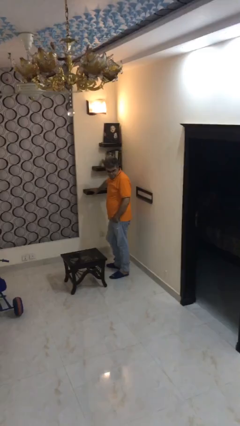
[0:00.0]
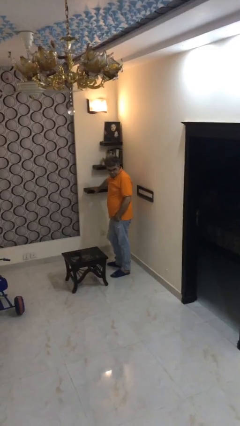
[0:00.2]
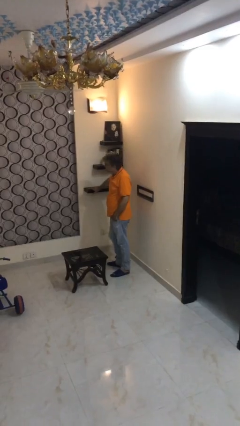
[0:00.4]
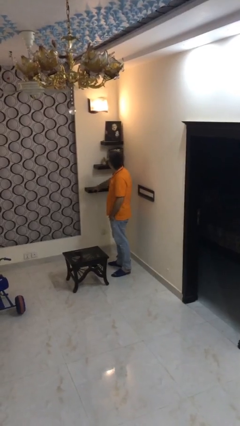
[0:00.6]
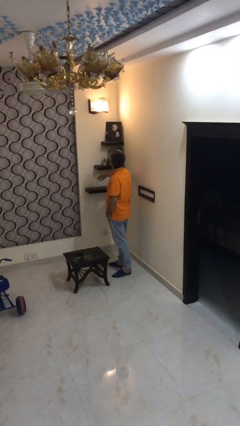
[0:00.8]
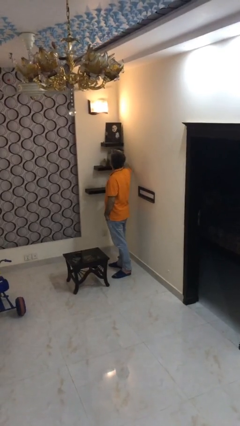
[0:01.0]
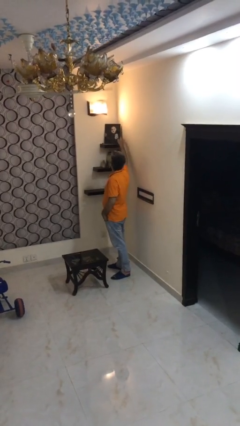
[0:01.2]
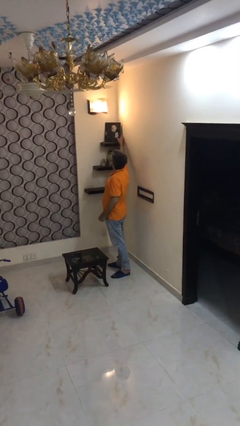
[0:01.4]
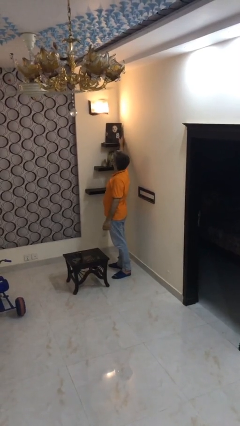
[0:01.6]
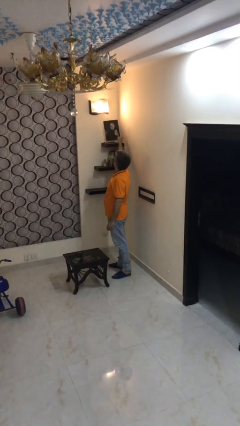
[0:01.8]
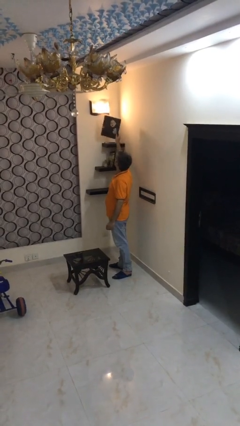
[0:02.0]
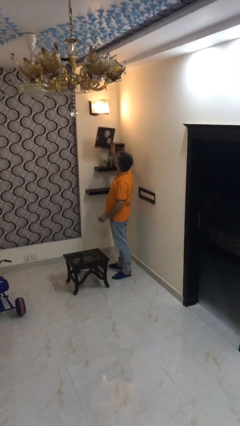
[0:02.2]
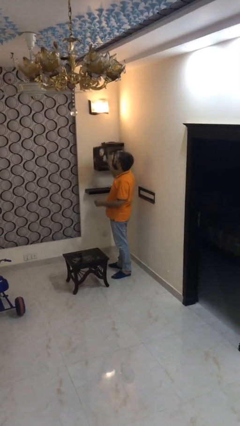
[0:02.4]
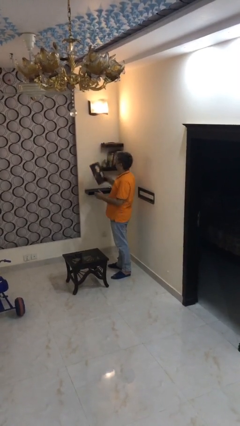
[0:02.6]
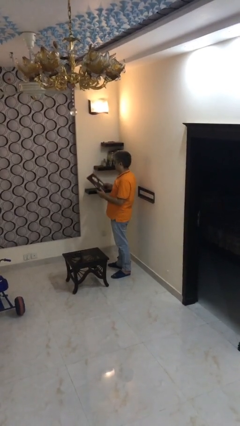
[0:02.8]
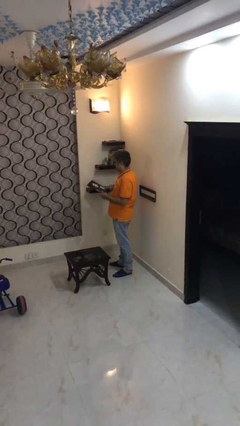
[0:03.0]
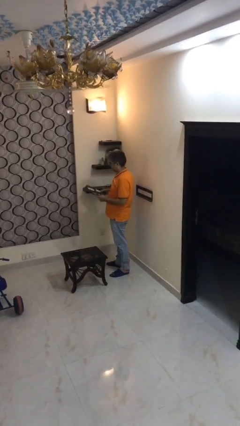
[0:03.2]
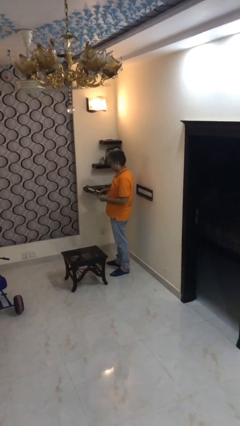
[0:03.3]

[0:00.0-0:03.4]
person picks up object from shelf

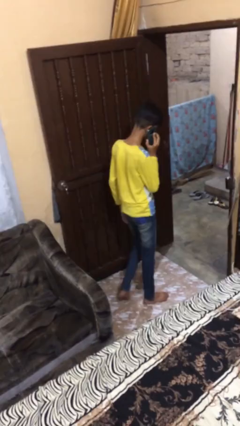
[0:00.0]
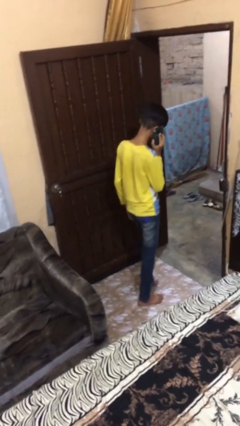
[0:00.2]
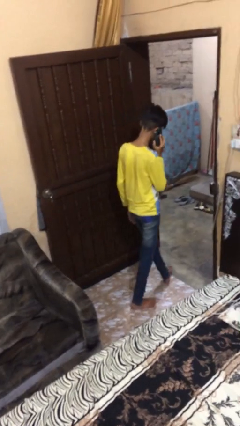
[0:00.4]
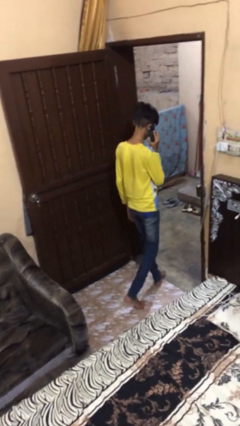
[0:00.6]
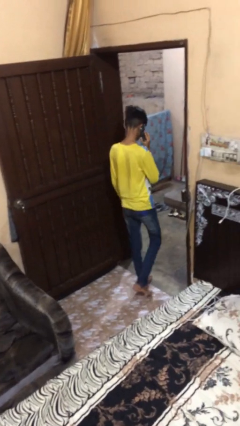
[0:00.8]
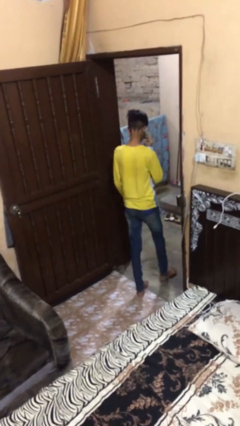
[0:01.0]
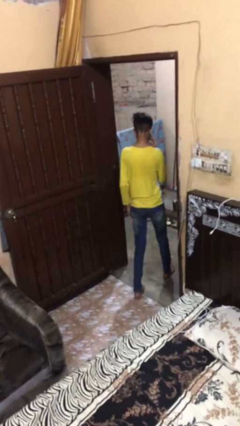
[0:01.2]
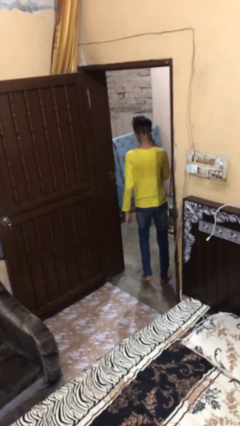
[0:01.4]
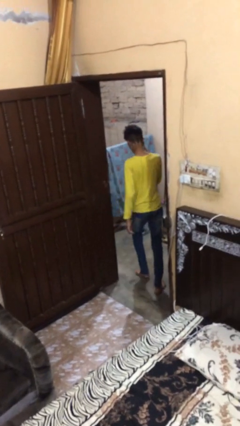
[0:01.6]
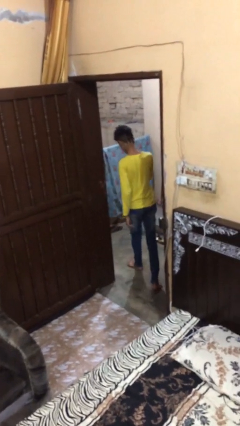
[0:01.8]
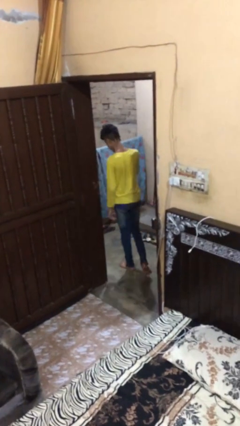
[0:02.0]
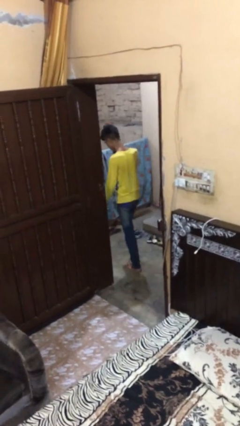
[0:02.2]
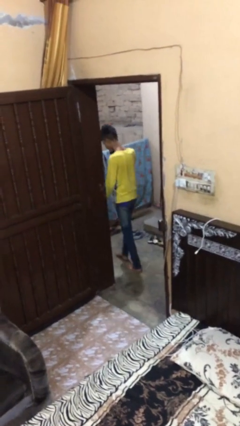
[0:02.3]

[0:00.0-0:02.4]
person exits scene through structure

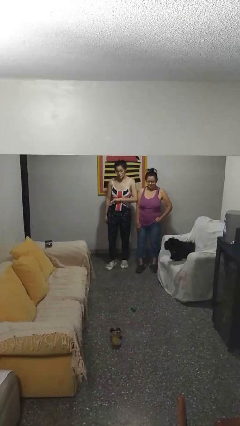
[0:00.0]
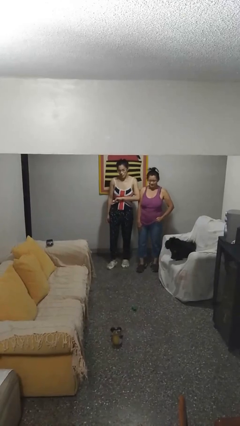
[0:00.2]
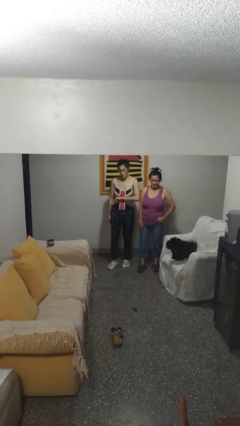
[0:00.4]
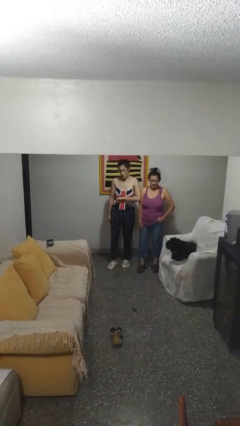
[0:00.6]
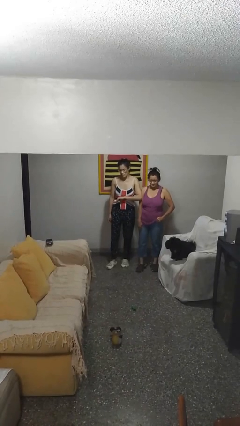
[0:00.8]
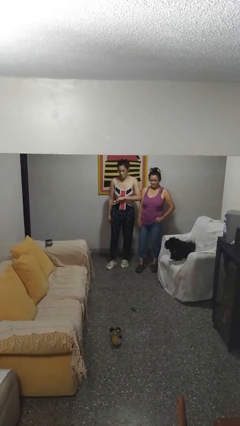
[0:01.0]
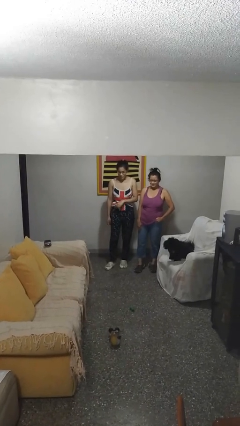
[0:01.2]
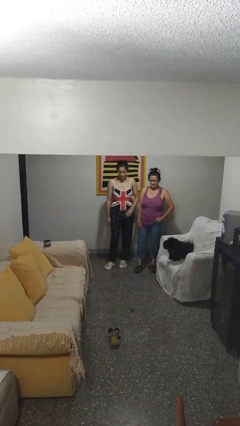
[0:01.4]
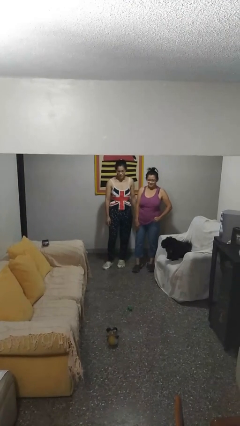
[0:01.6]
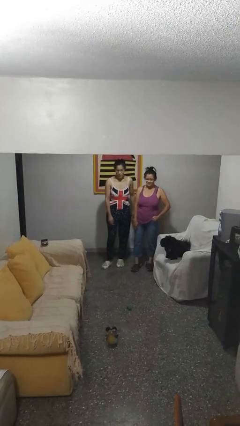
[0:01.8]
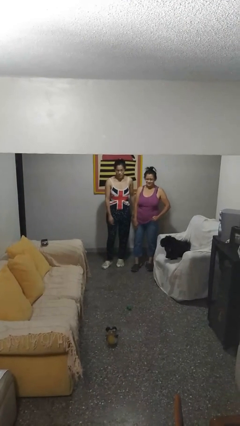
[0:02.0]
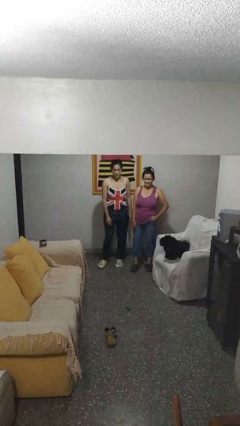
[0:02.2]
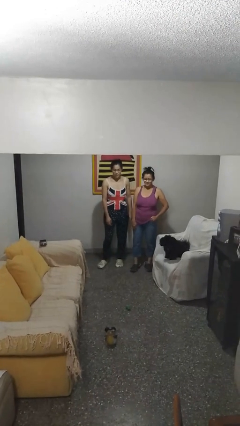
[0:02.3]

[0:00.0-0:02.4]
person nudges person with elbow

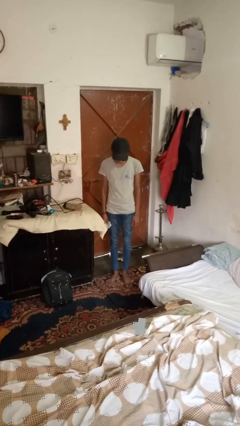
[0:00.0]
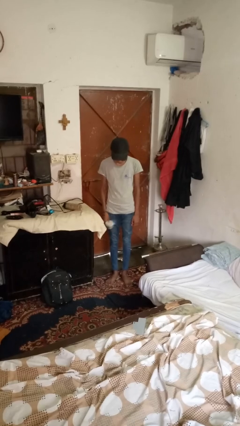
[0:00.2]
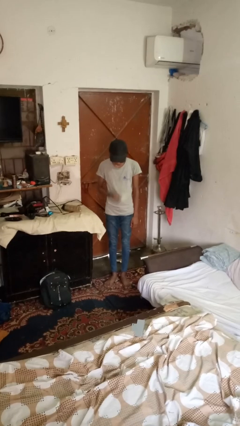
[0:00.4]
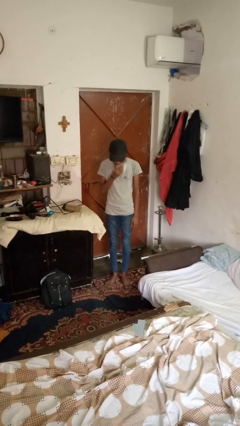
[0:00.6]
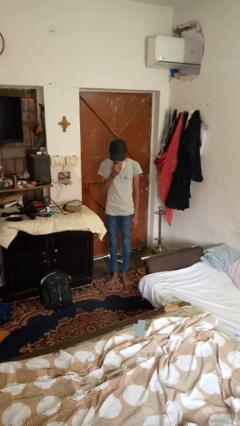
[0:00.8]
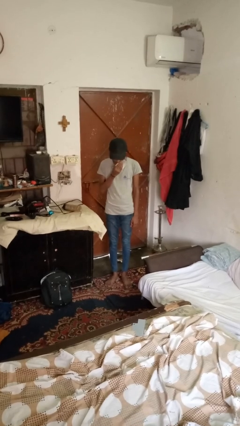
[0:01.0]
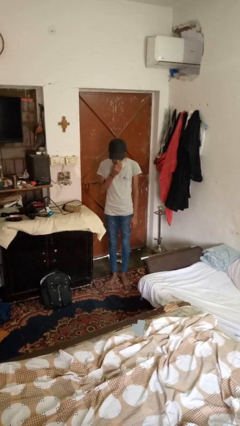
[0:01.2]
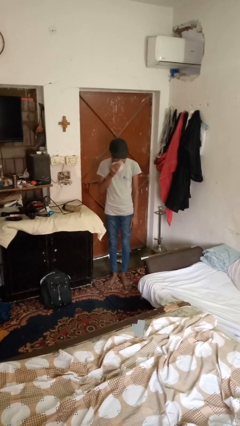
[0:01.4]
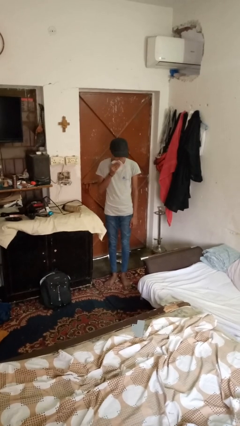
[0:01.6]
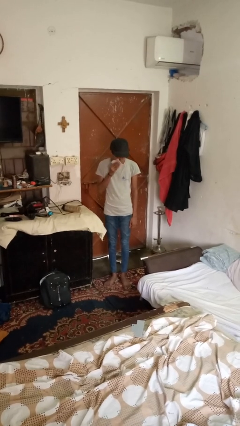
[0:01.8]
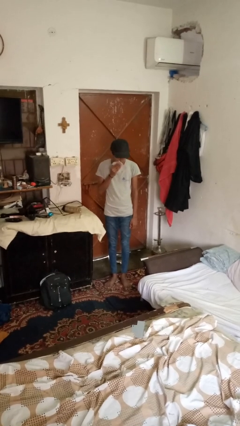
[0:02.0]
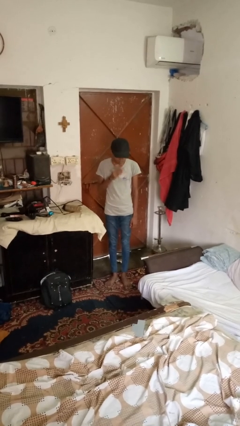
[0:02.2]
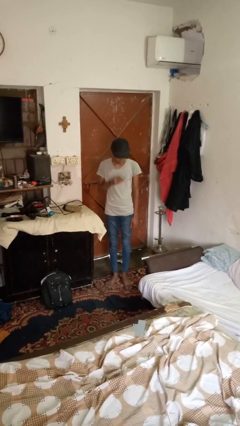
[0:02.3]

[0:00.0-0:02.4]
person wipes mouth with napkin

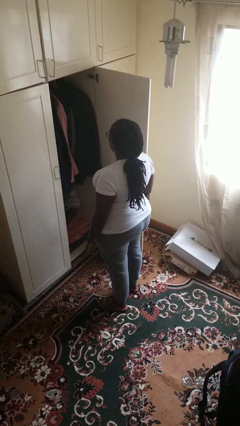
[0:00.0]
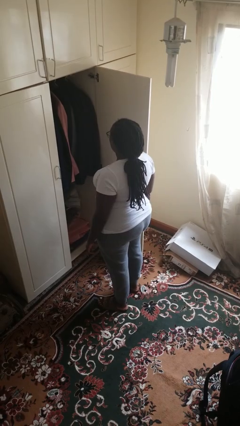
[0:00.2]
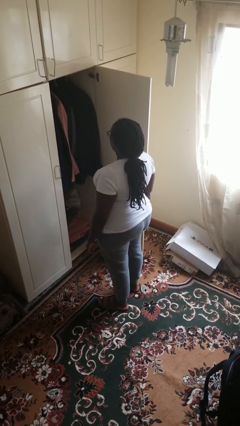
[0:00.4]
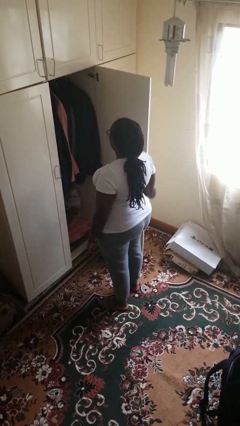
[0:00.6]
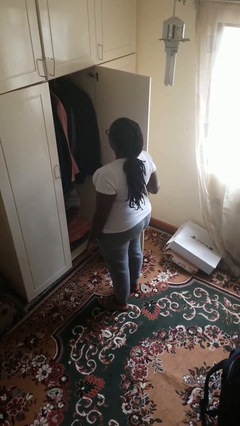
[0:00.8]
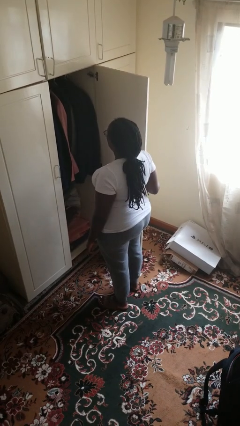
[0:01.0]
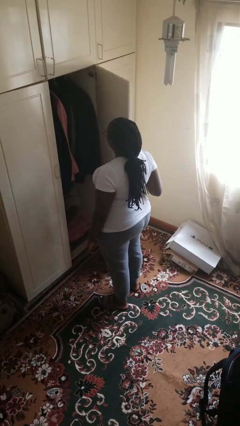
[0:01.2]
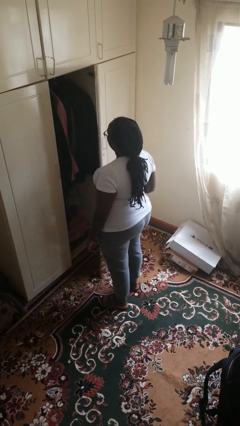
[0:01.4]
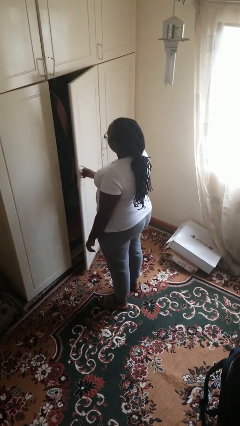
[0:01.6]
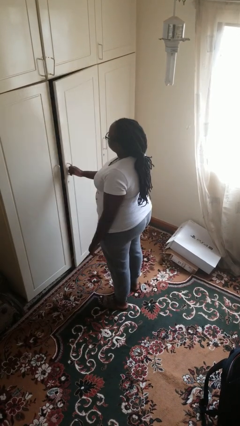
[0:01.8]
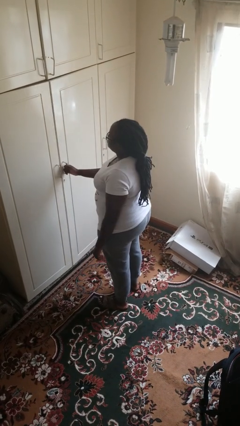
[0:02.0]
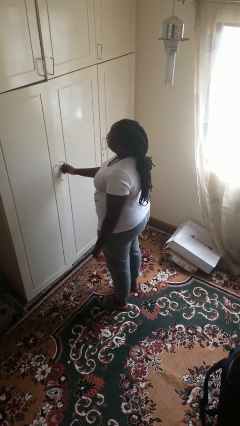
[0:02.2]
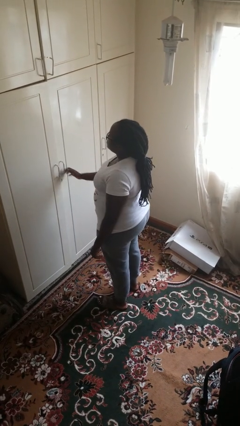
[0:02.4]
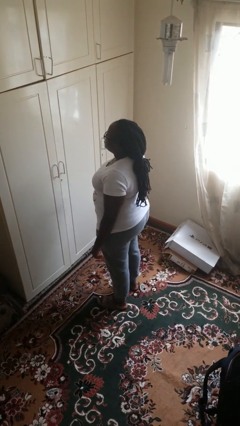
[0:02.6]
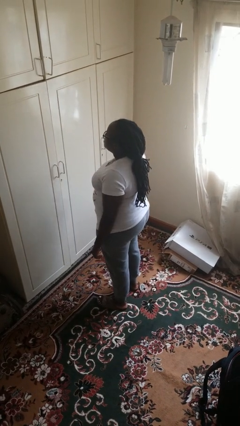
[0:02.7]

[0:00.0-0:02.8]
person closes closet door

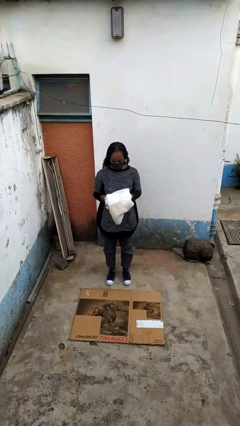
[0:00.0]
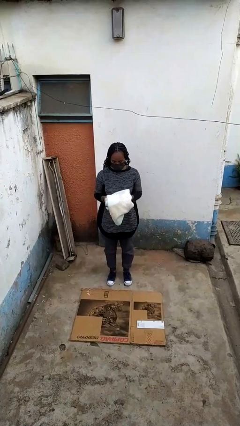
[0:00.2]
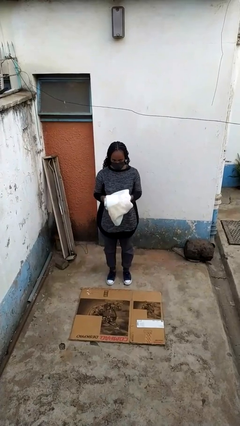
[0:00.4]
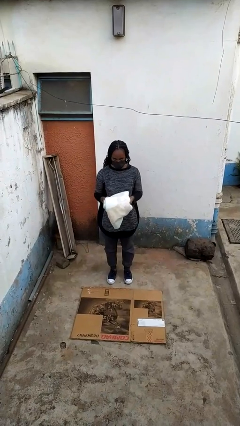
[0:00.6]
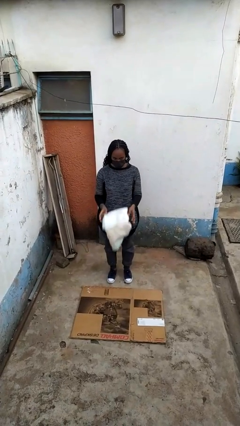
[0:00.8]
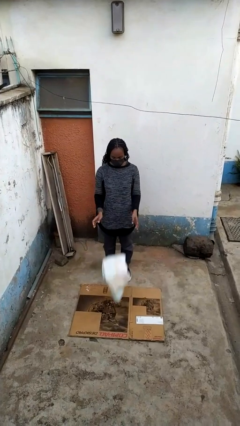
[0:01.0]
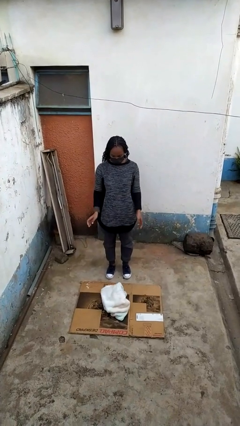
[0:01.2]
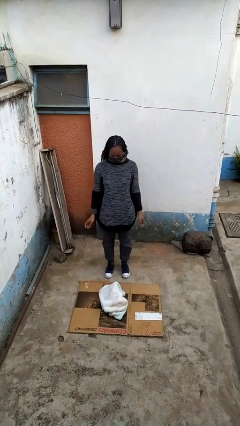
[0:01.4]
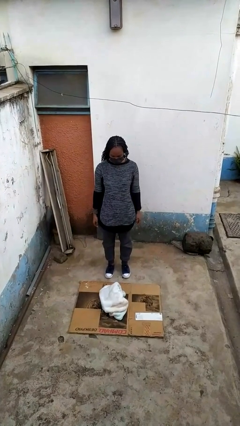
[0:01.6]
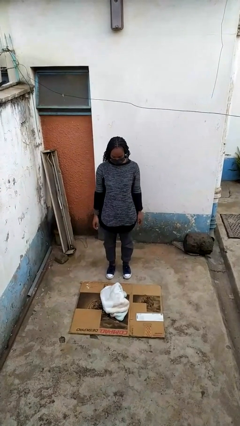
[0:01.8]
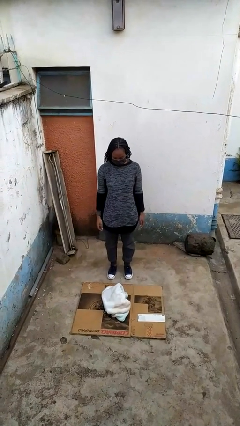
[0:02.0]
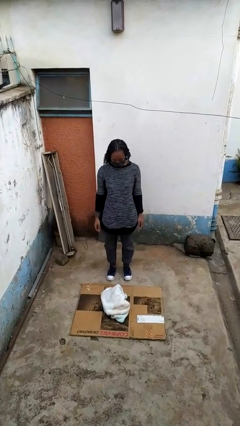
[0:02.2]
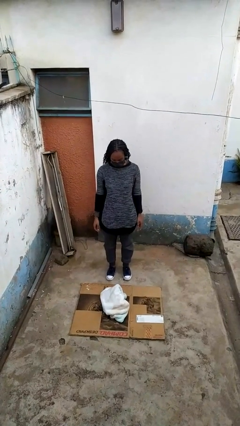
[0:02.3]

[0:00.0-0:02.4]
person drops object

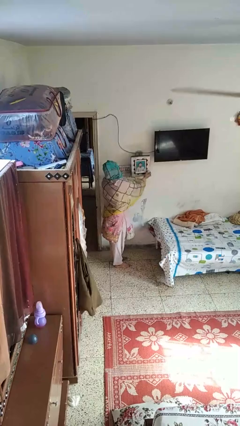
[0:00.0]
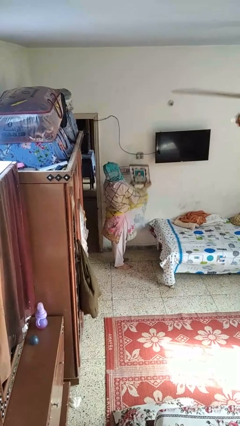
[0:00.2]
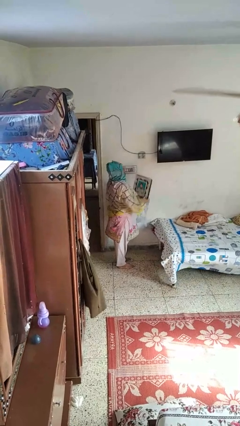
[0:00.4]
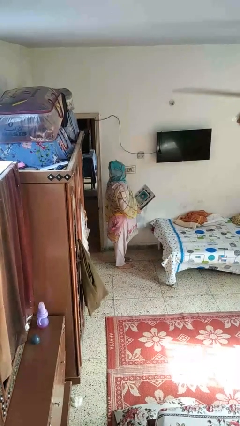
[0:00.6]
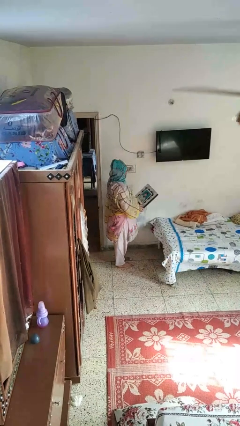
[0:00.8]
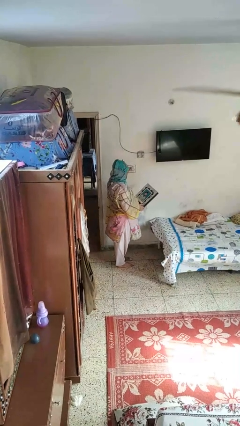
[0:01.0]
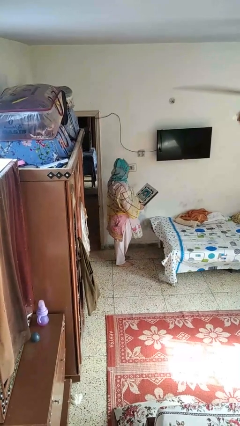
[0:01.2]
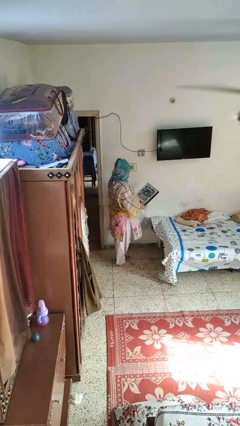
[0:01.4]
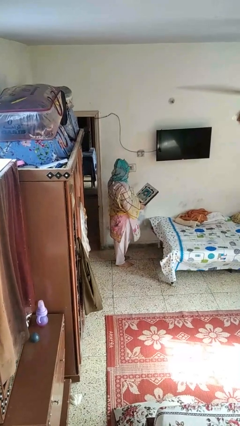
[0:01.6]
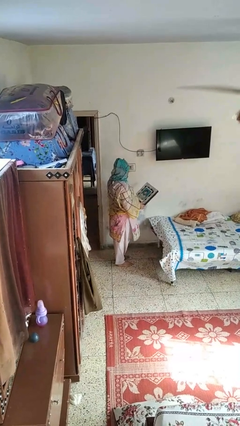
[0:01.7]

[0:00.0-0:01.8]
person takes down picture frame
